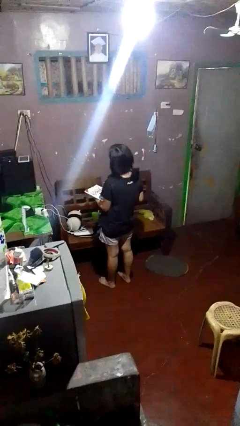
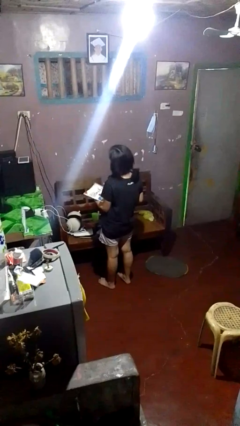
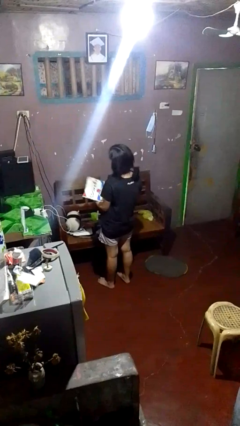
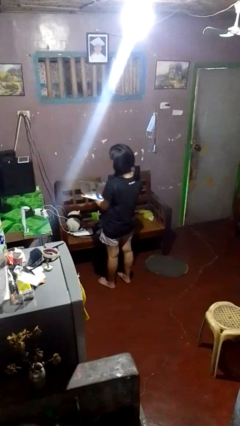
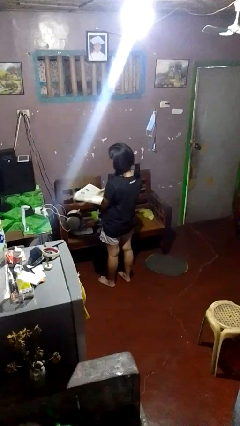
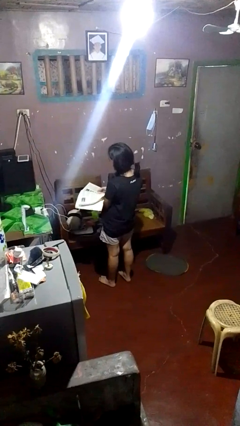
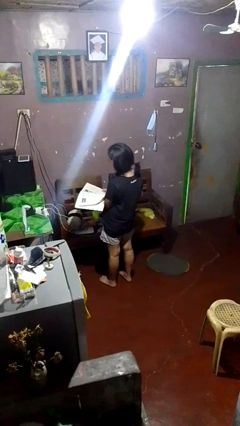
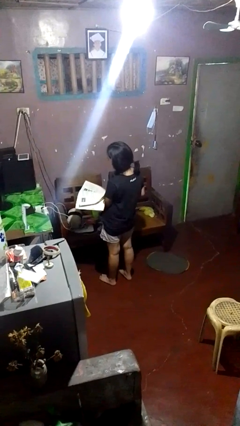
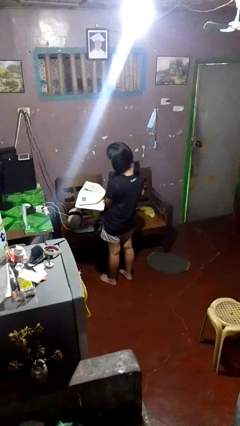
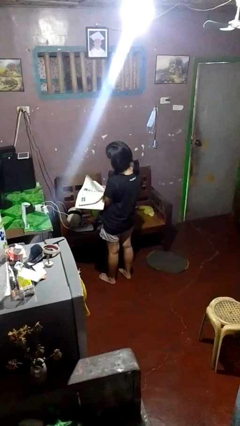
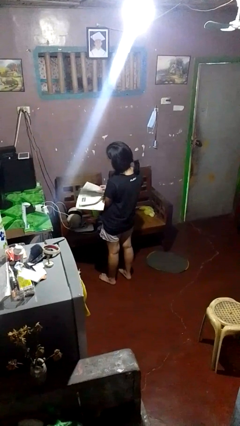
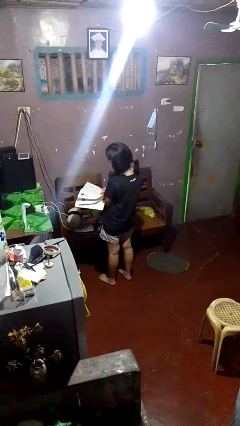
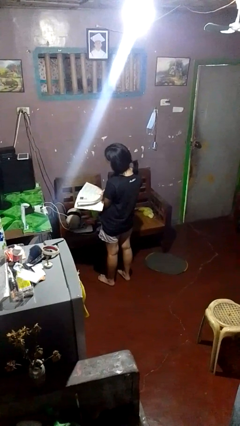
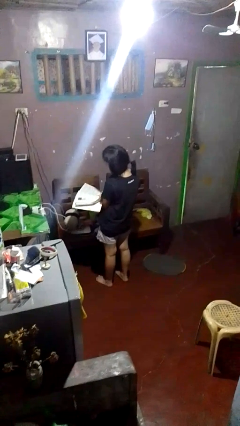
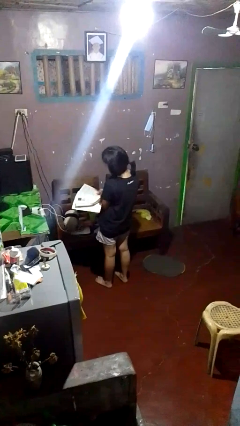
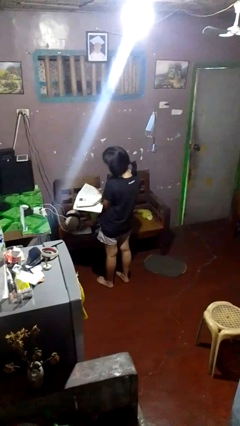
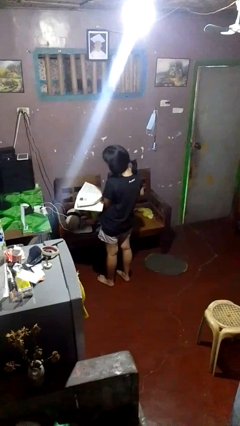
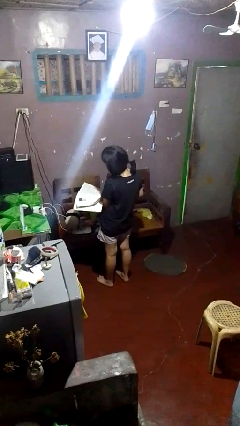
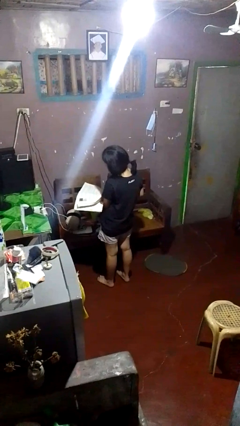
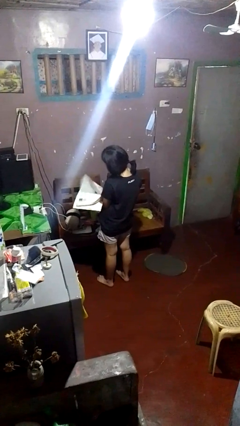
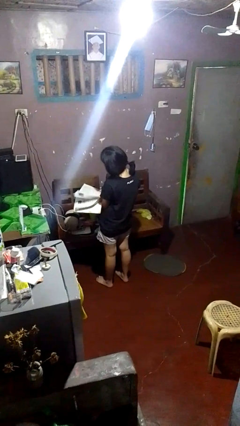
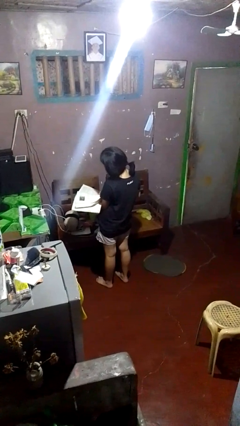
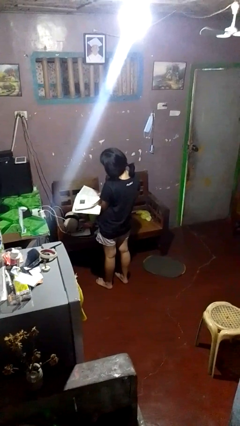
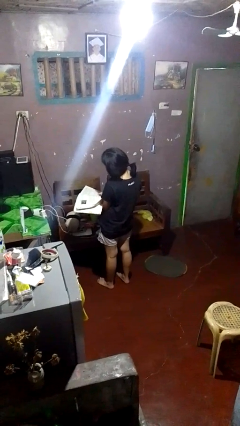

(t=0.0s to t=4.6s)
person reads book

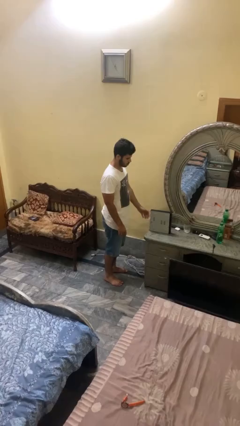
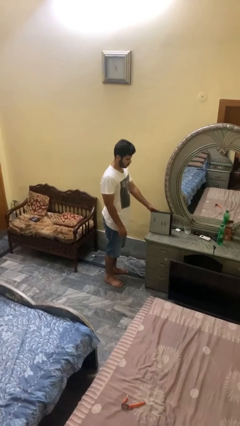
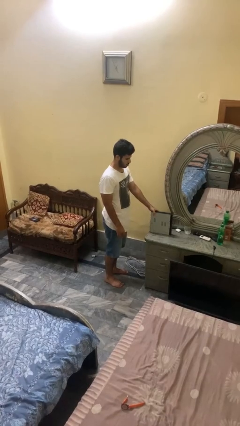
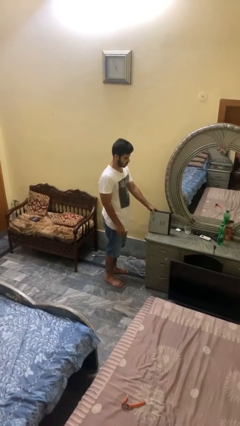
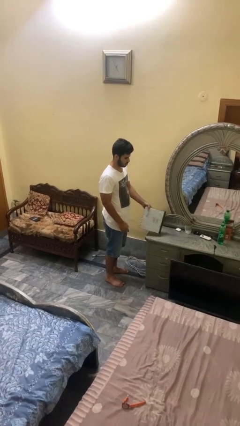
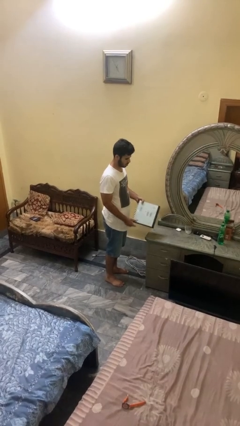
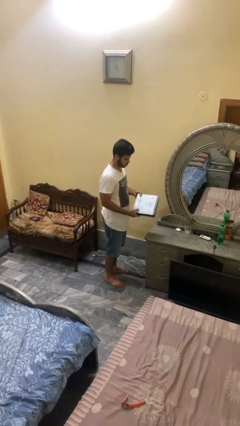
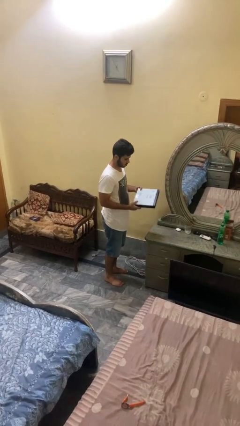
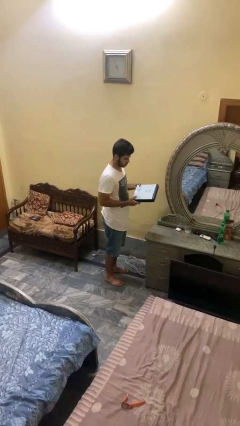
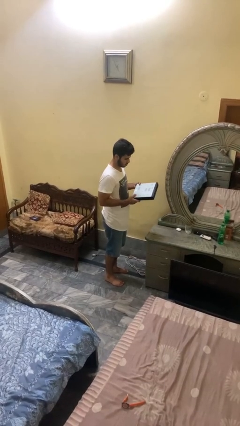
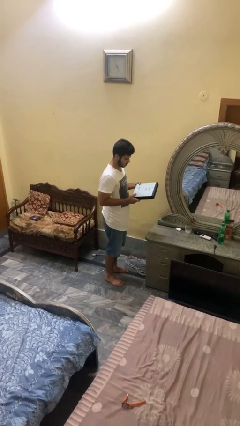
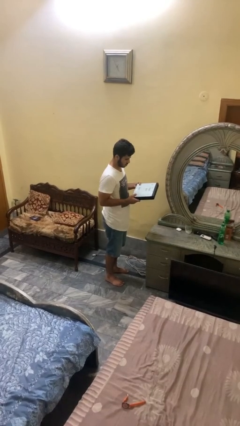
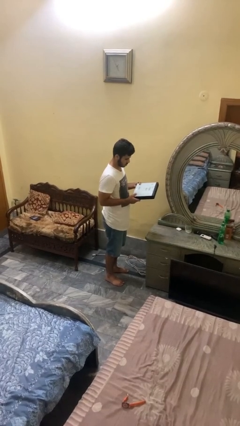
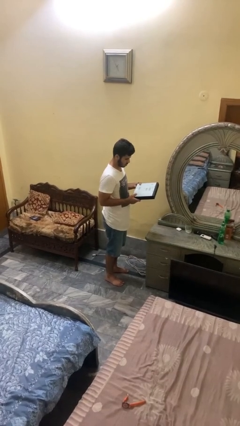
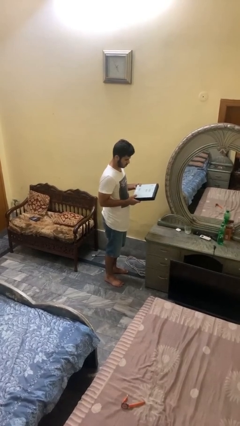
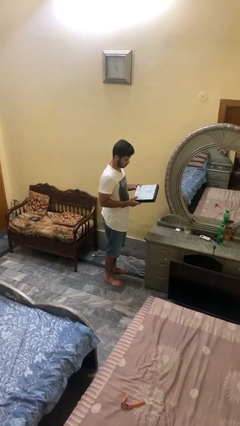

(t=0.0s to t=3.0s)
person picks up object from countertop

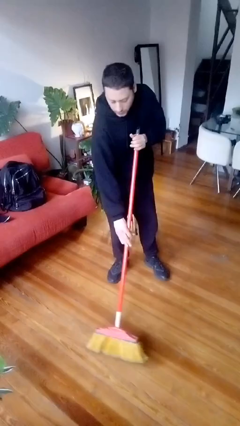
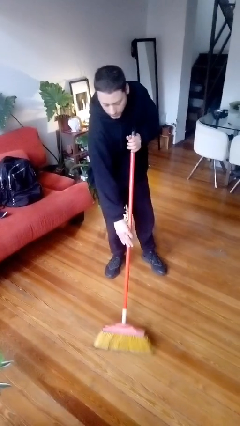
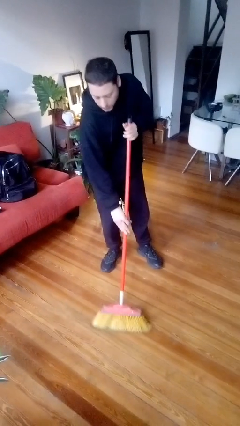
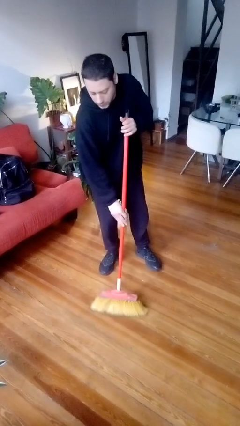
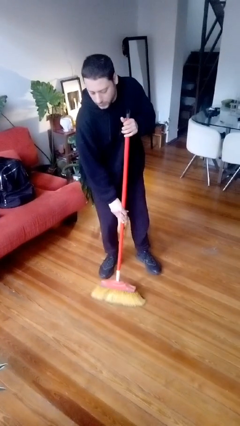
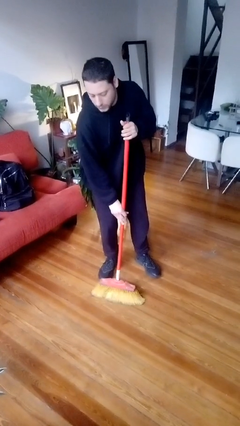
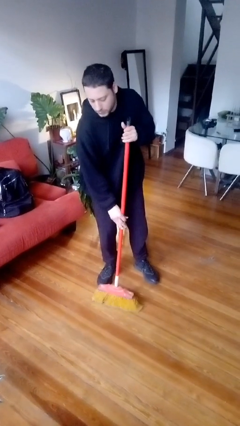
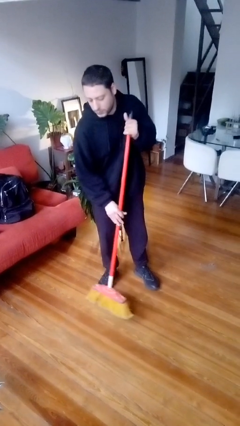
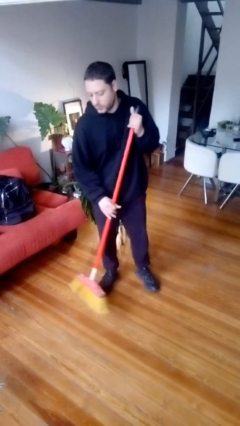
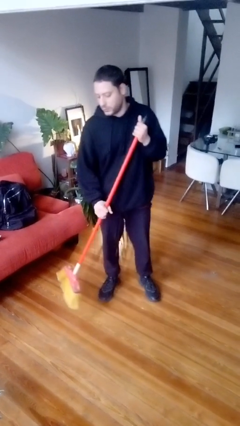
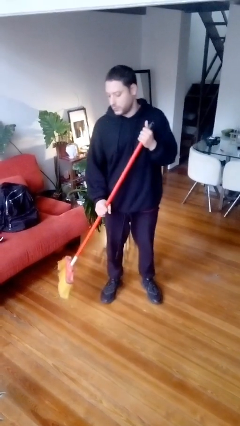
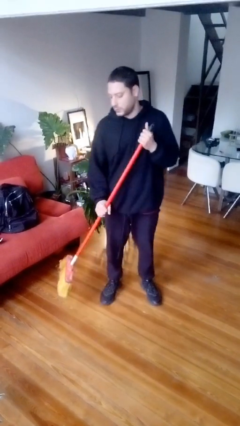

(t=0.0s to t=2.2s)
person sweeps floor

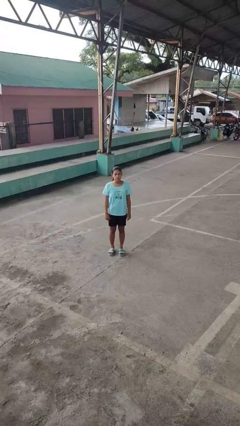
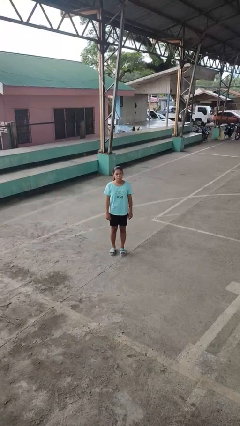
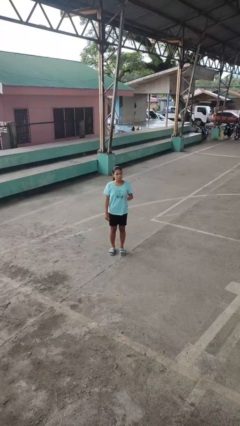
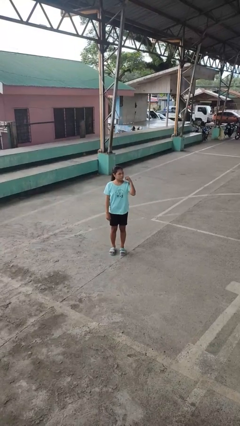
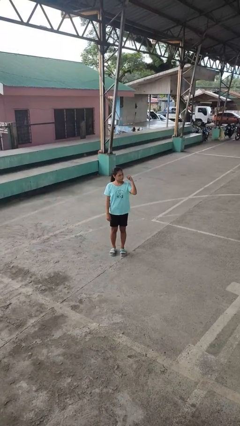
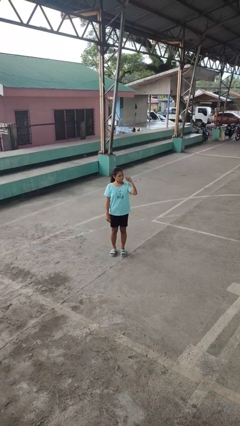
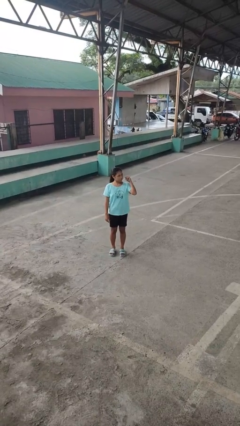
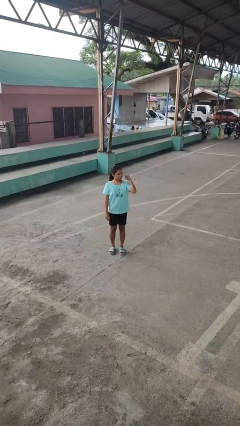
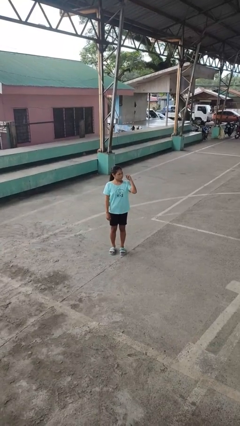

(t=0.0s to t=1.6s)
person gestures behind me

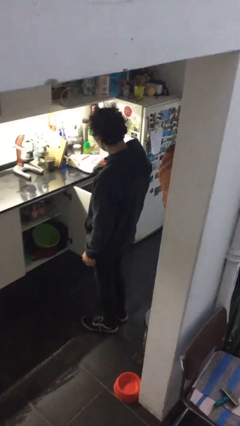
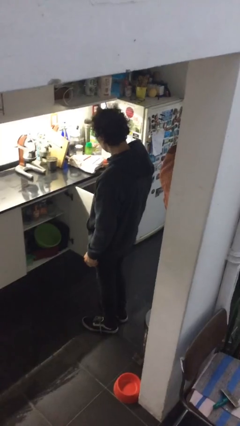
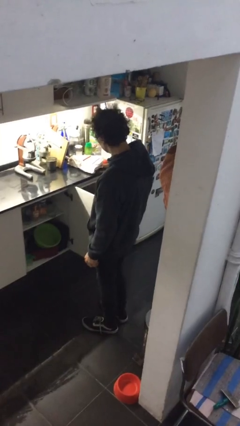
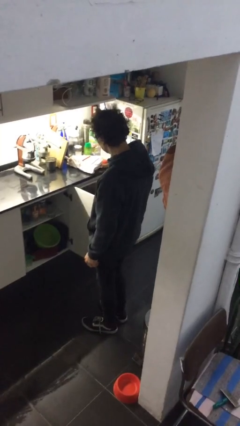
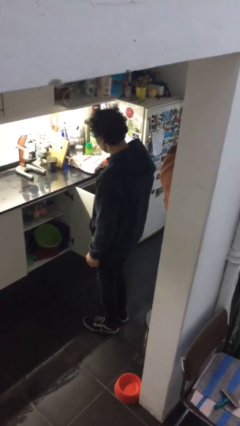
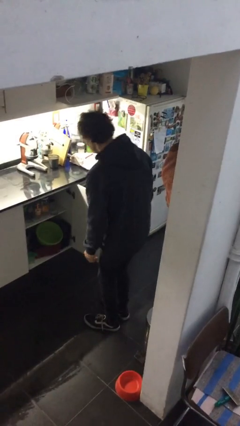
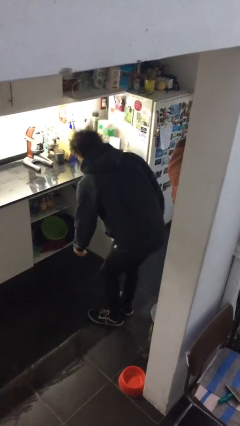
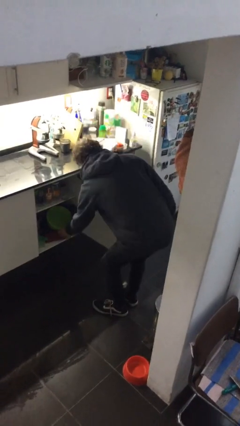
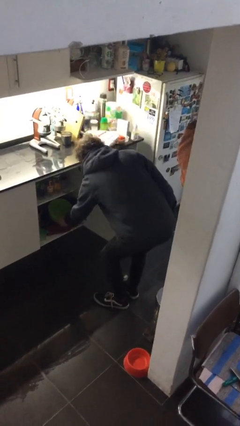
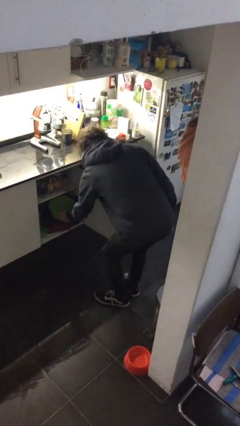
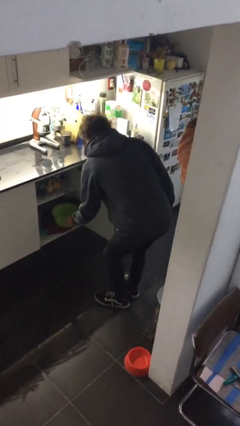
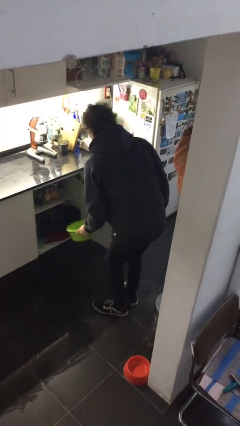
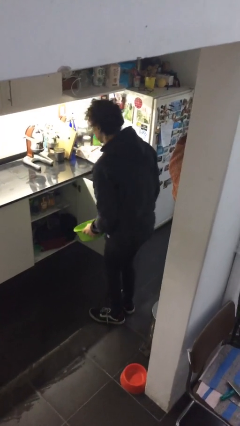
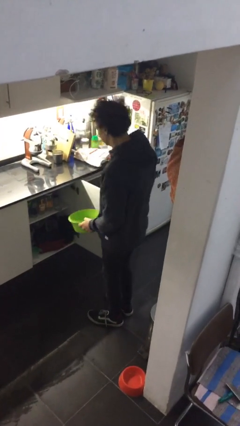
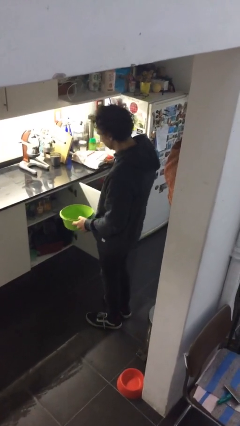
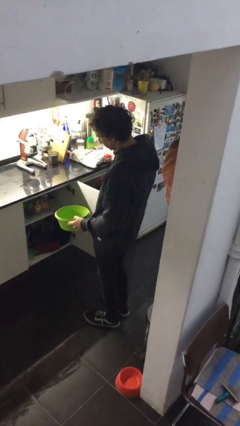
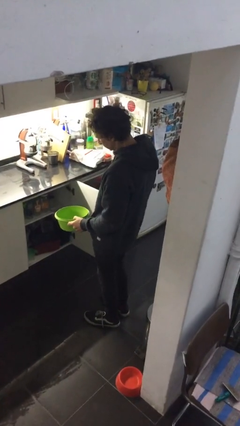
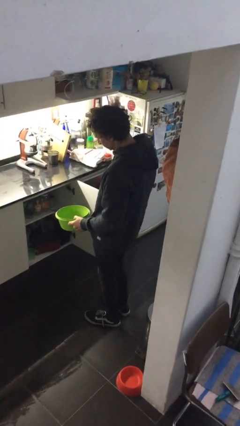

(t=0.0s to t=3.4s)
person picks up object from cabinet

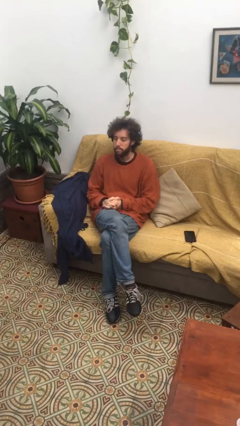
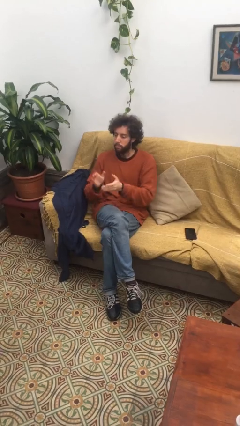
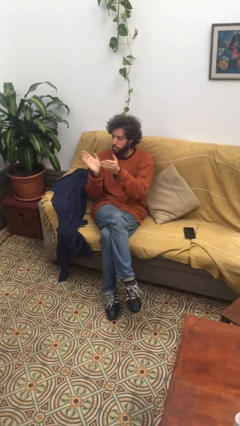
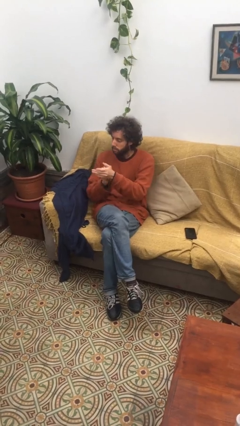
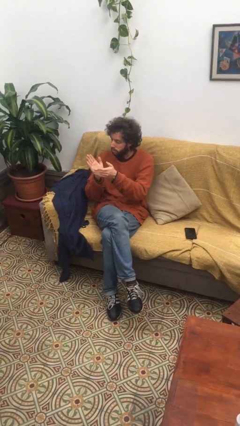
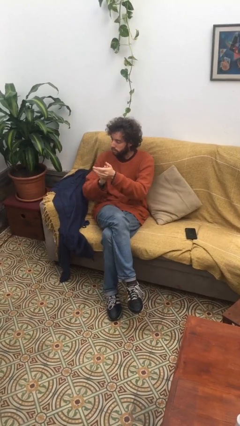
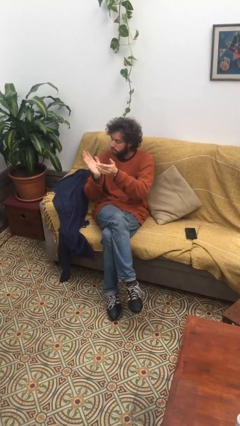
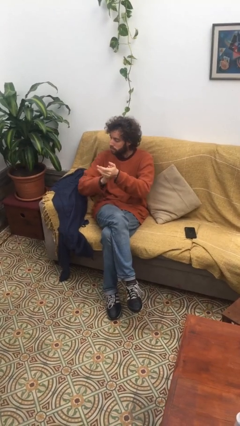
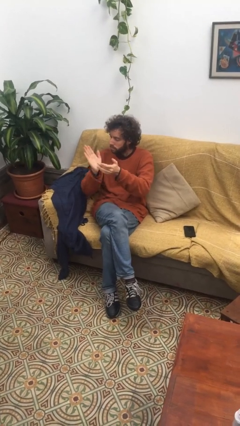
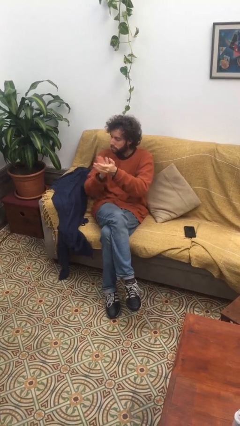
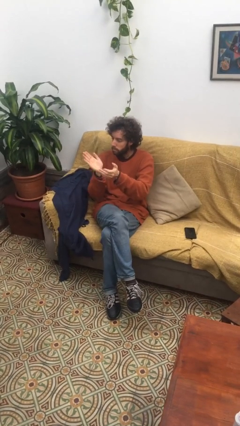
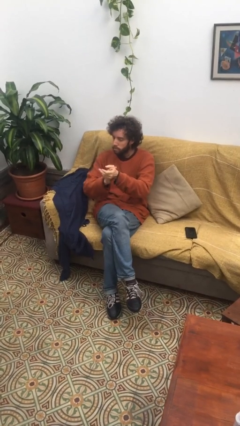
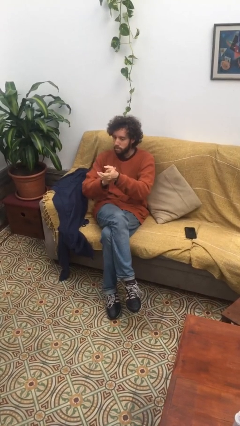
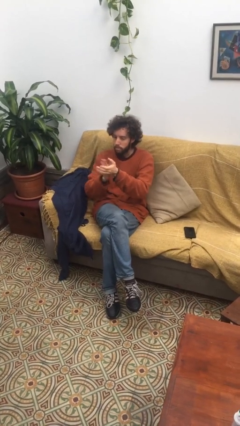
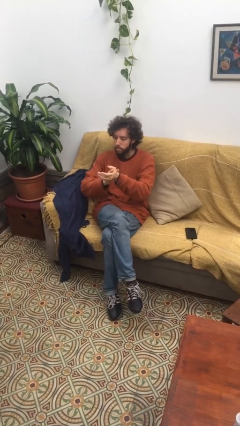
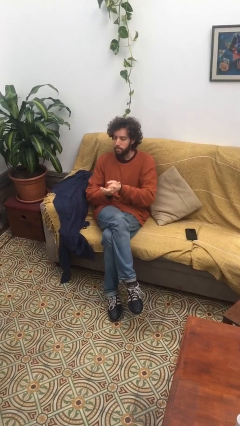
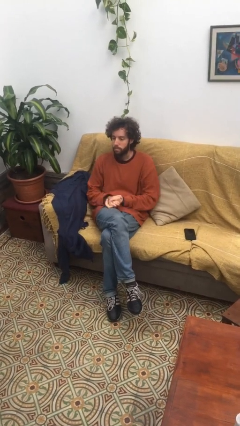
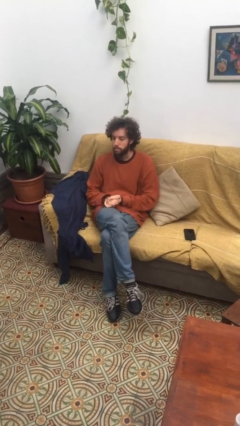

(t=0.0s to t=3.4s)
person claps hands
